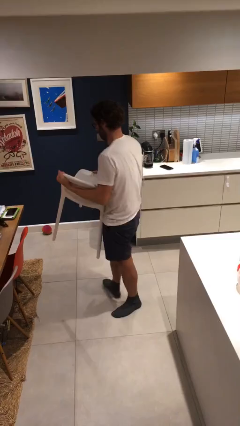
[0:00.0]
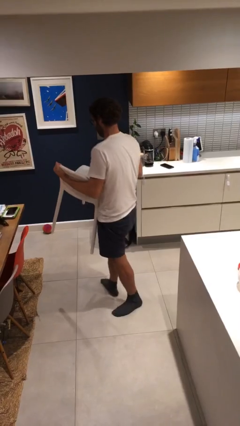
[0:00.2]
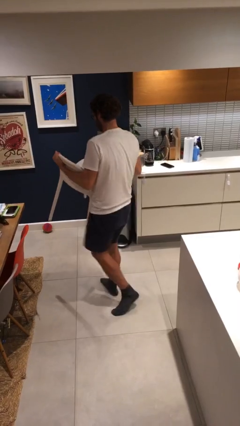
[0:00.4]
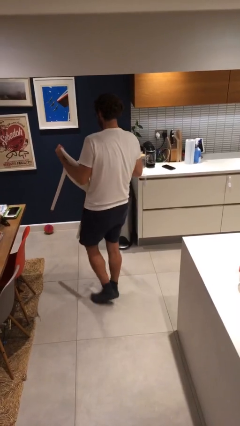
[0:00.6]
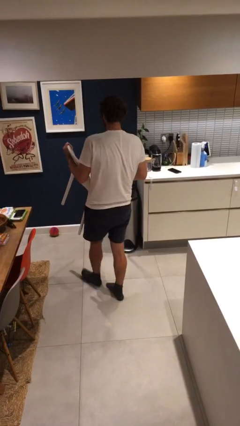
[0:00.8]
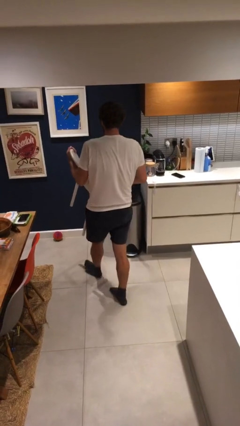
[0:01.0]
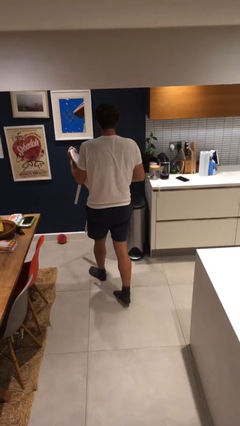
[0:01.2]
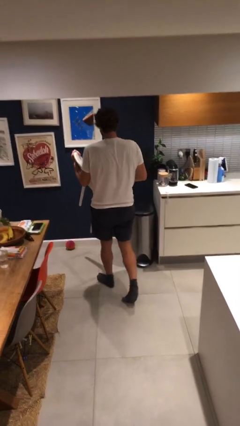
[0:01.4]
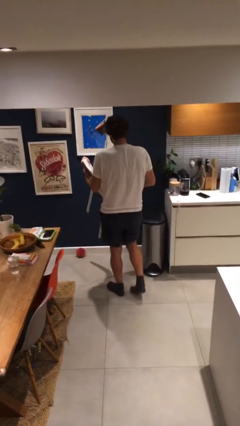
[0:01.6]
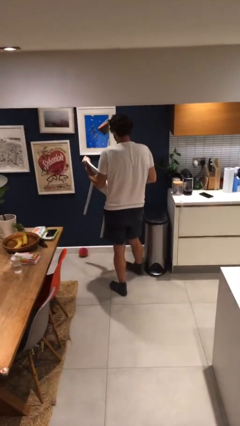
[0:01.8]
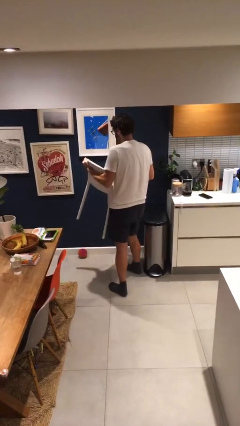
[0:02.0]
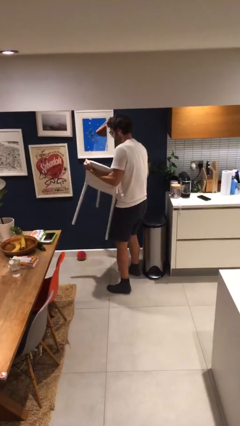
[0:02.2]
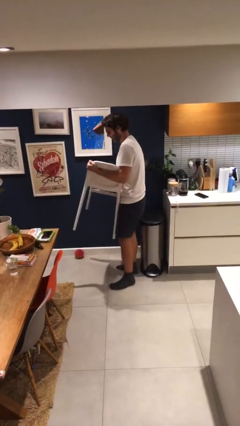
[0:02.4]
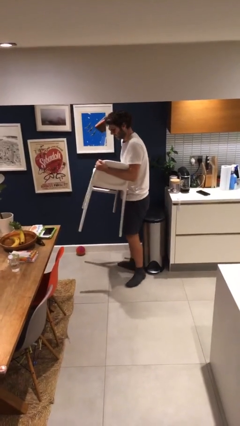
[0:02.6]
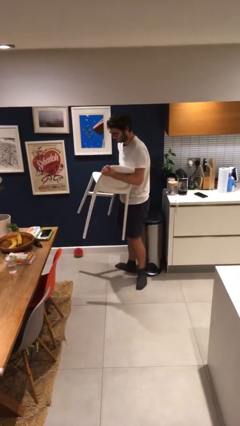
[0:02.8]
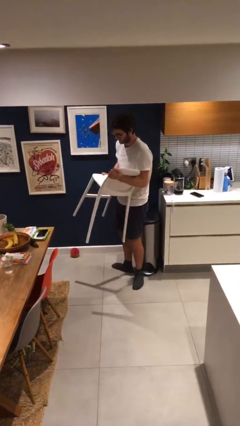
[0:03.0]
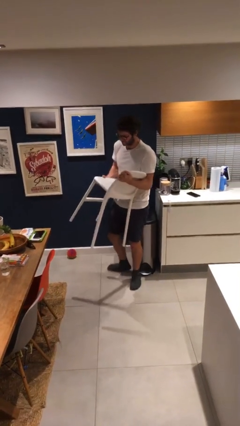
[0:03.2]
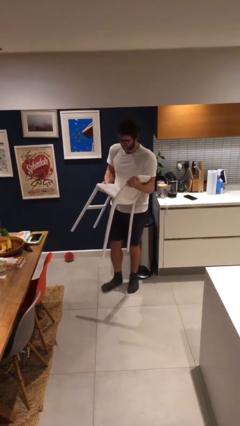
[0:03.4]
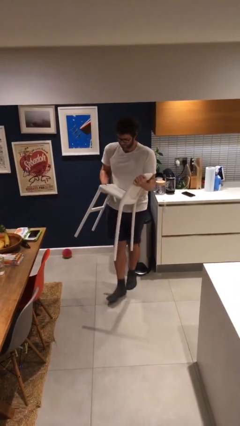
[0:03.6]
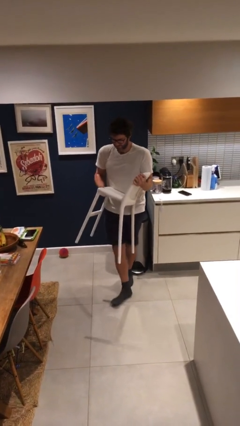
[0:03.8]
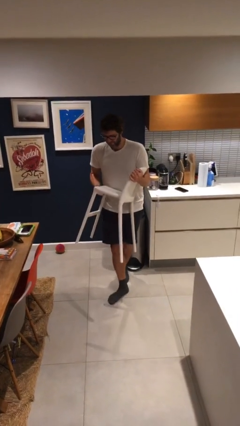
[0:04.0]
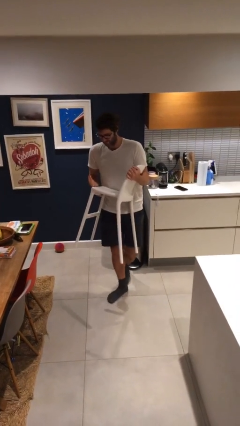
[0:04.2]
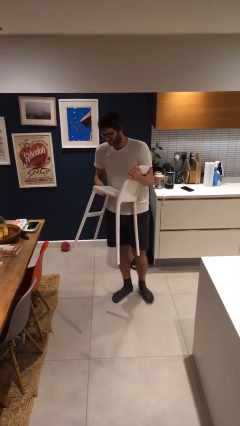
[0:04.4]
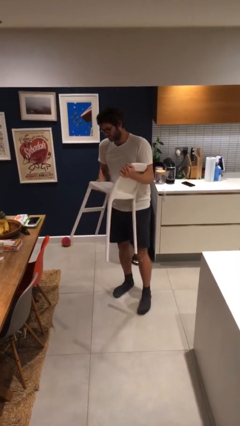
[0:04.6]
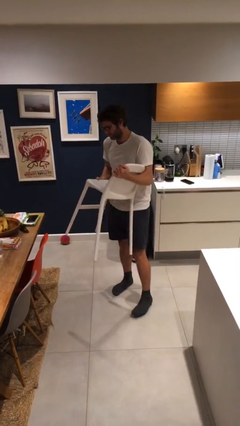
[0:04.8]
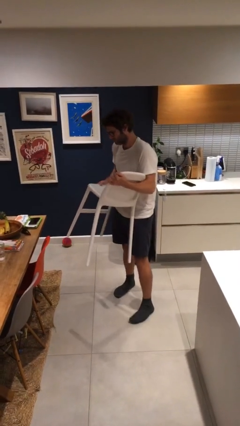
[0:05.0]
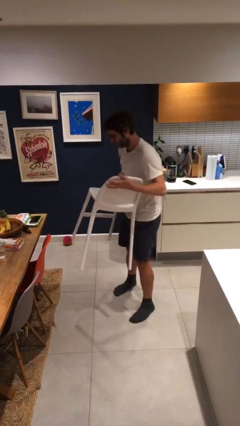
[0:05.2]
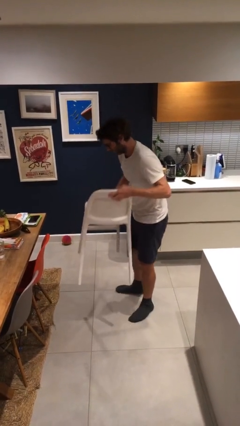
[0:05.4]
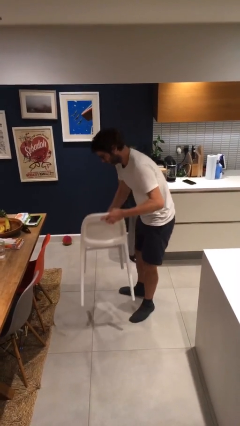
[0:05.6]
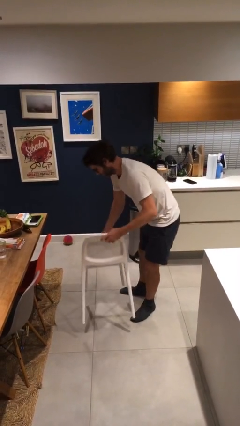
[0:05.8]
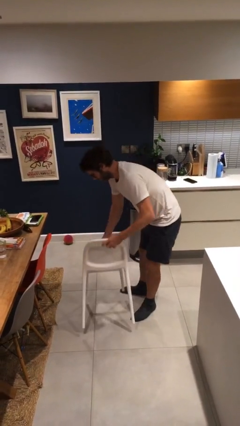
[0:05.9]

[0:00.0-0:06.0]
person carries heavy object

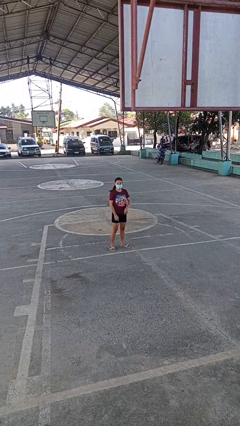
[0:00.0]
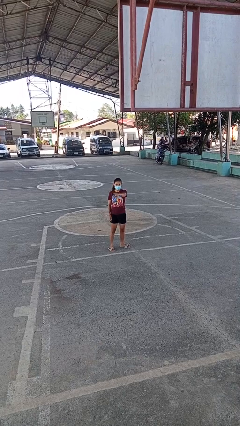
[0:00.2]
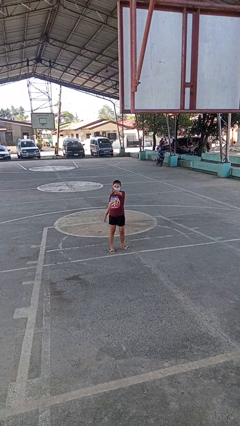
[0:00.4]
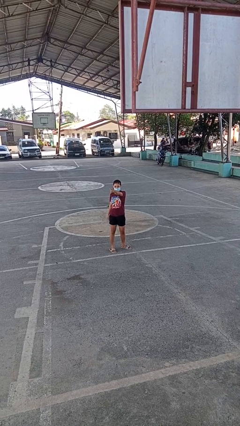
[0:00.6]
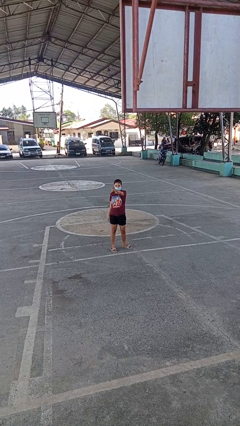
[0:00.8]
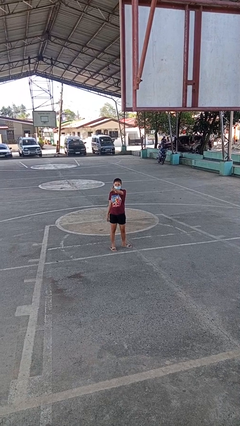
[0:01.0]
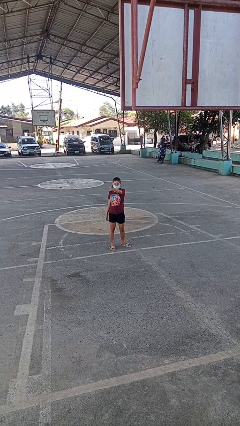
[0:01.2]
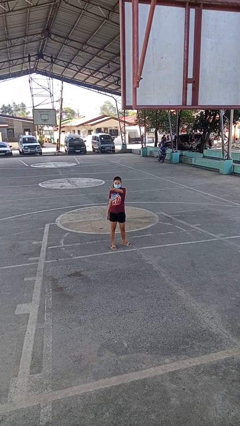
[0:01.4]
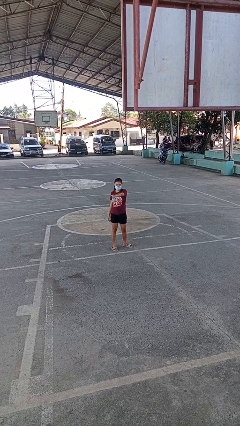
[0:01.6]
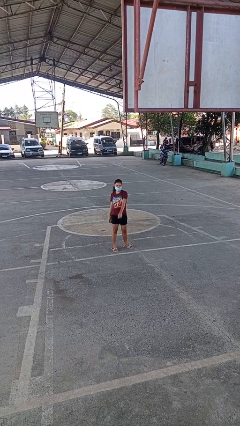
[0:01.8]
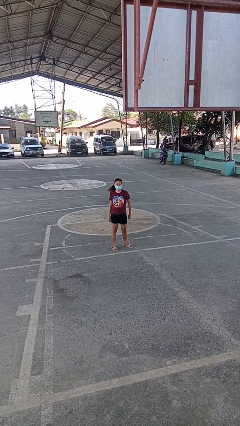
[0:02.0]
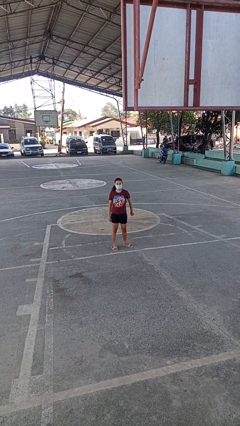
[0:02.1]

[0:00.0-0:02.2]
person points at person

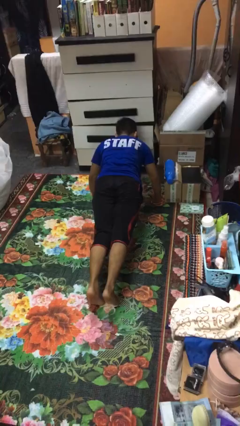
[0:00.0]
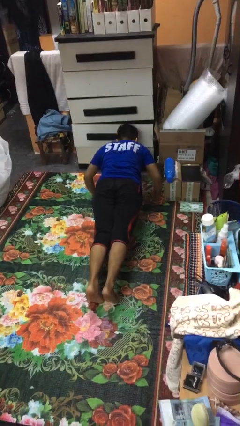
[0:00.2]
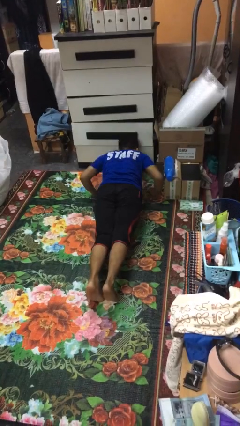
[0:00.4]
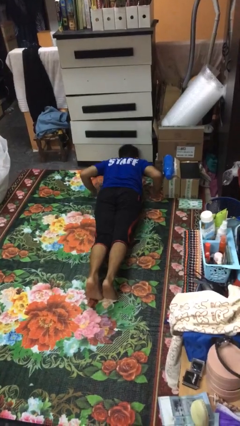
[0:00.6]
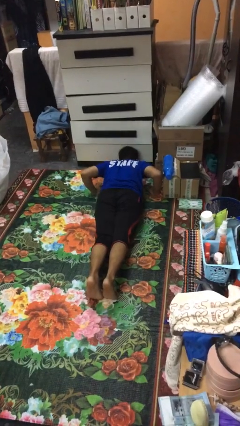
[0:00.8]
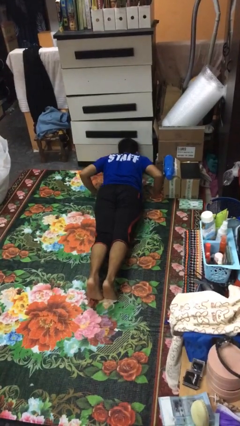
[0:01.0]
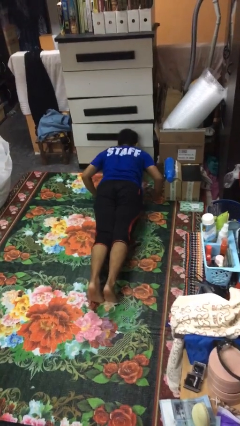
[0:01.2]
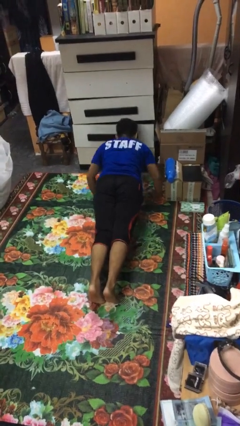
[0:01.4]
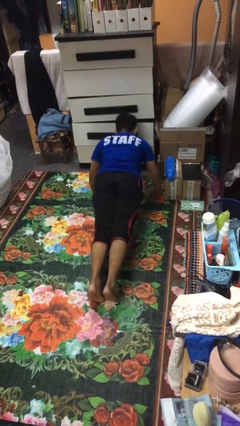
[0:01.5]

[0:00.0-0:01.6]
person exercises with pushup

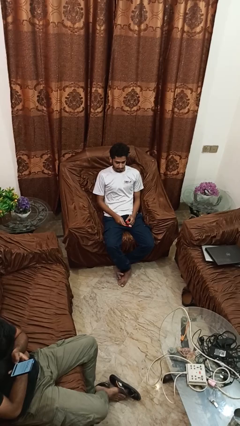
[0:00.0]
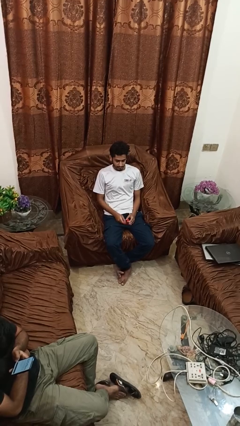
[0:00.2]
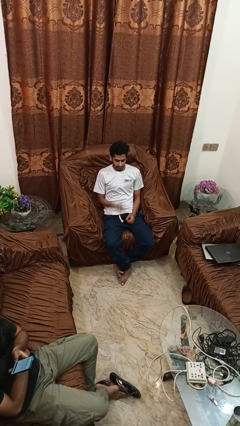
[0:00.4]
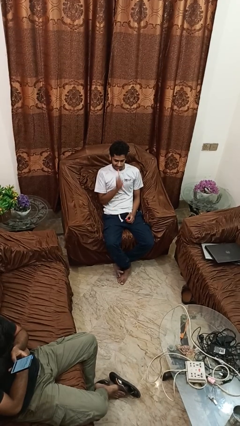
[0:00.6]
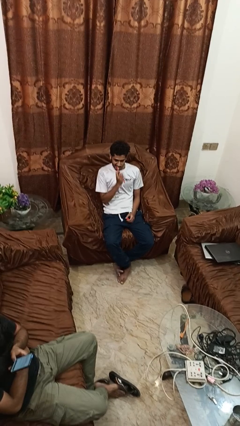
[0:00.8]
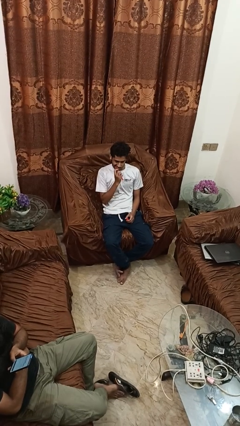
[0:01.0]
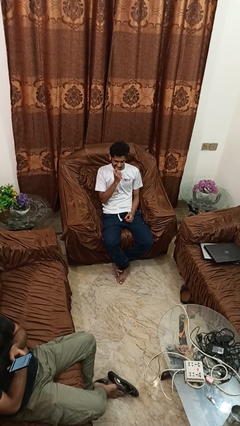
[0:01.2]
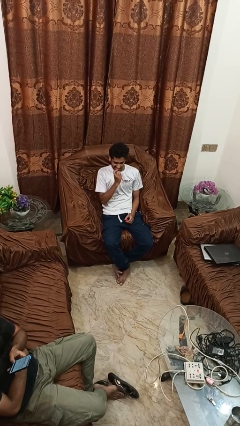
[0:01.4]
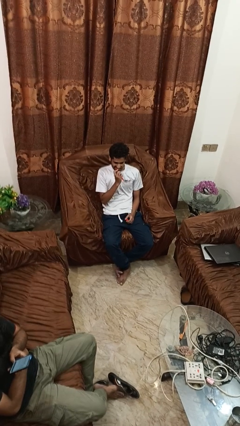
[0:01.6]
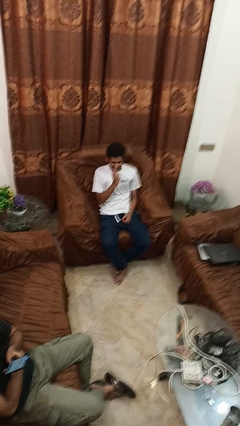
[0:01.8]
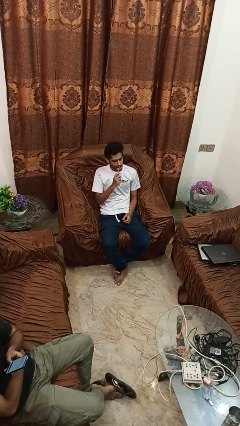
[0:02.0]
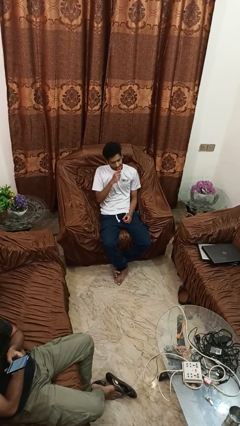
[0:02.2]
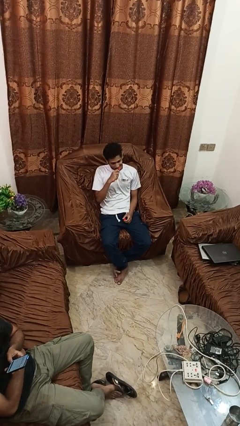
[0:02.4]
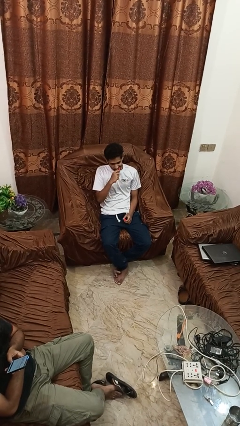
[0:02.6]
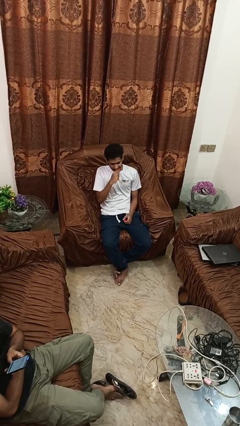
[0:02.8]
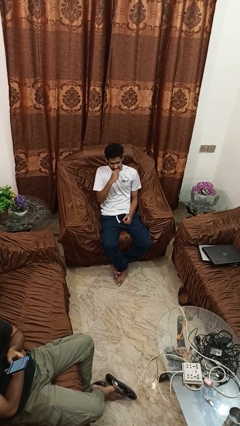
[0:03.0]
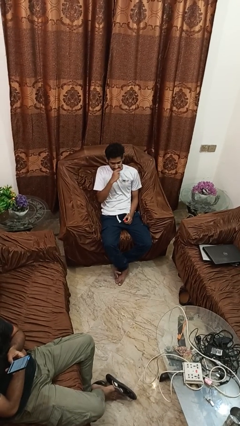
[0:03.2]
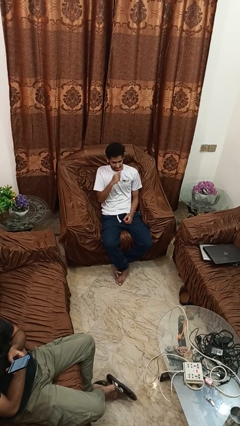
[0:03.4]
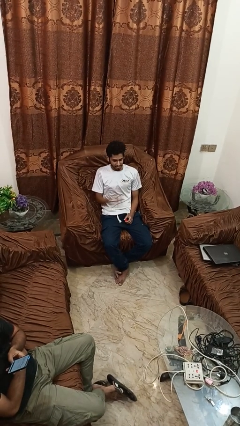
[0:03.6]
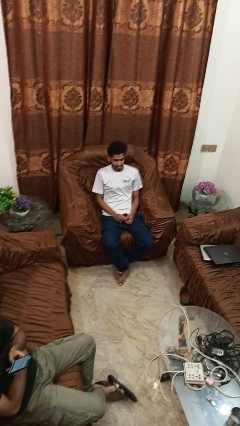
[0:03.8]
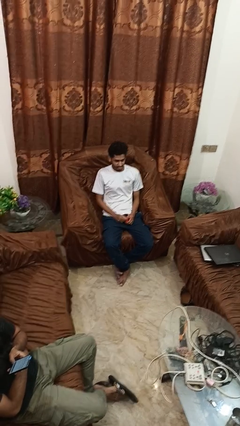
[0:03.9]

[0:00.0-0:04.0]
person brushes teeth

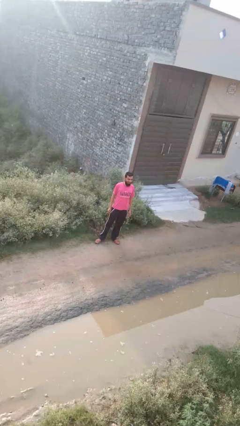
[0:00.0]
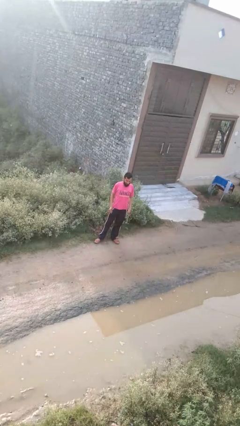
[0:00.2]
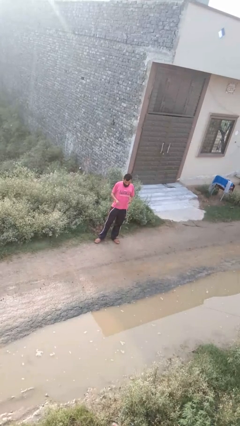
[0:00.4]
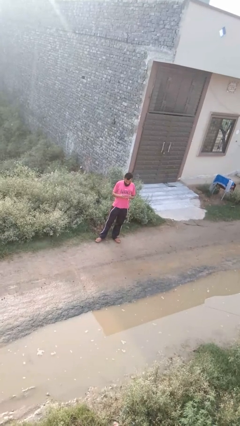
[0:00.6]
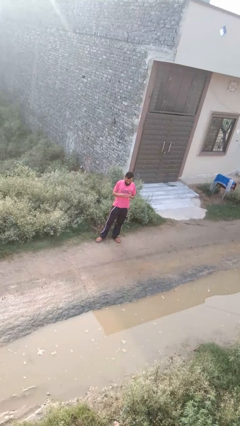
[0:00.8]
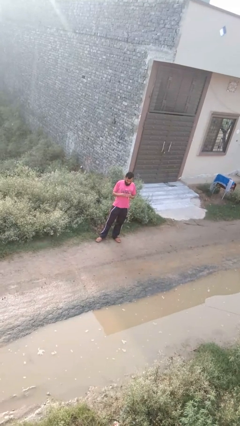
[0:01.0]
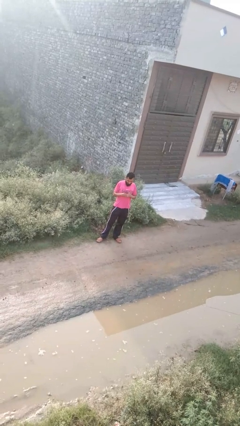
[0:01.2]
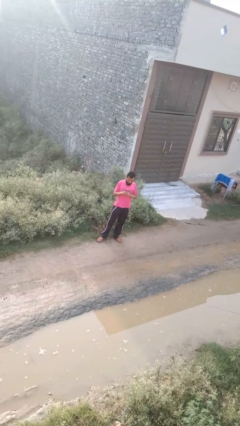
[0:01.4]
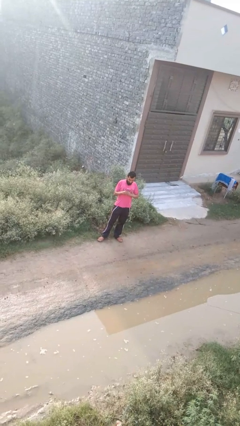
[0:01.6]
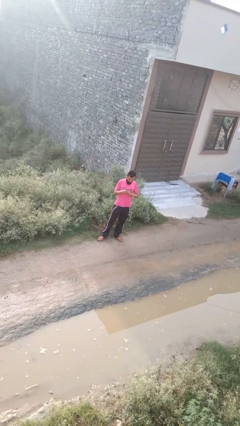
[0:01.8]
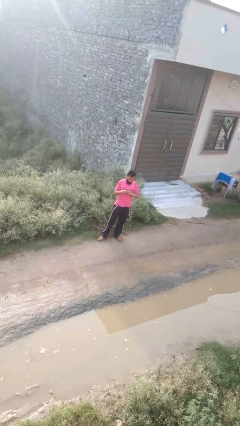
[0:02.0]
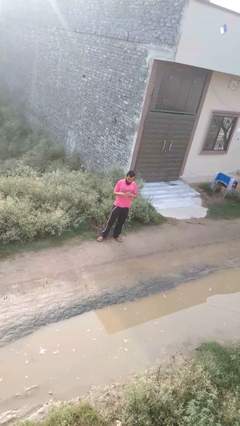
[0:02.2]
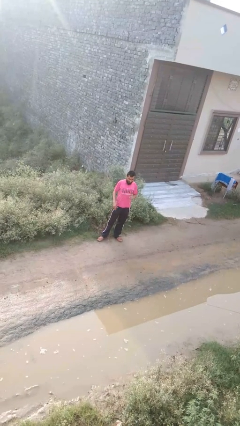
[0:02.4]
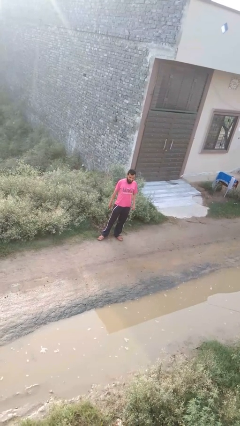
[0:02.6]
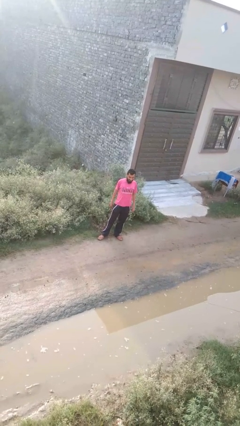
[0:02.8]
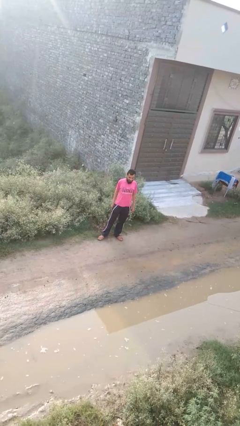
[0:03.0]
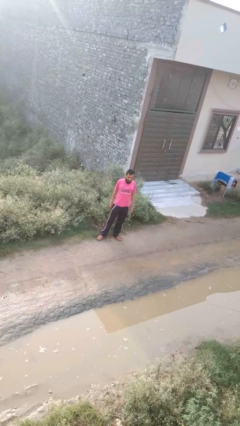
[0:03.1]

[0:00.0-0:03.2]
person puts on ring

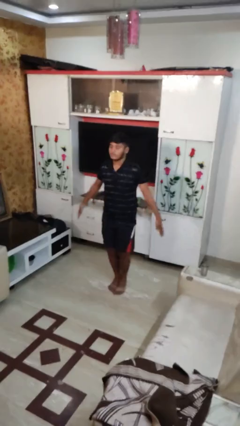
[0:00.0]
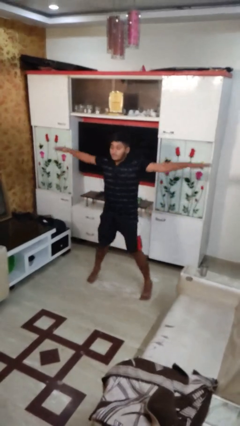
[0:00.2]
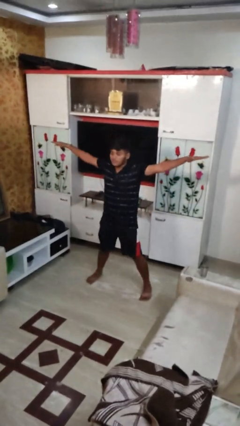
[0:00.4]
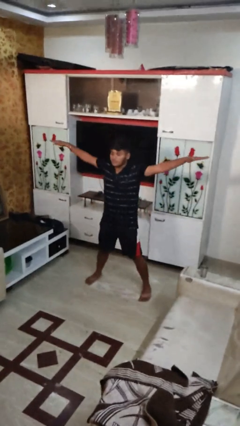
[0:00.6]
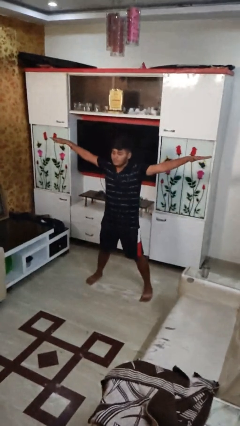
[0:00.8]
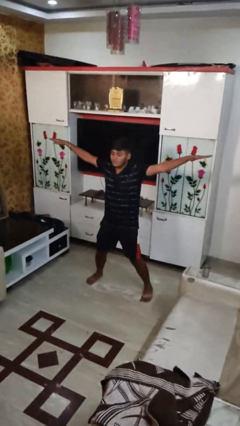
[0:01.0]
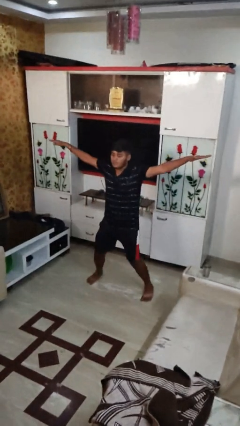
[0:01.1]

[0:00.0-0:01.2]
person exercises with jumping jacks
